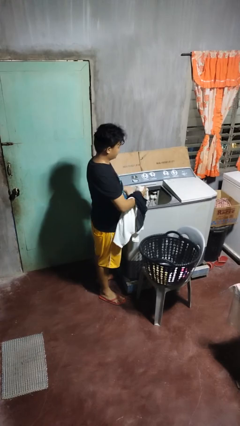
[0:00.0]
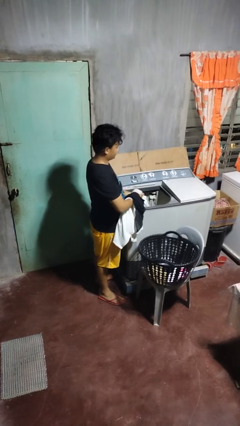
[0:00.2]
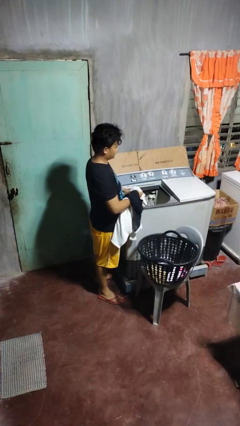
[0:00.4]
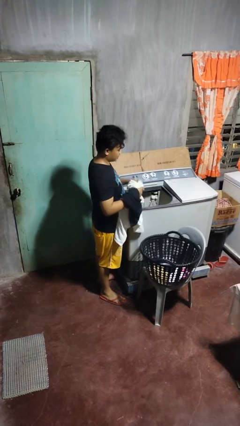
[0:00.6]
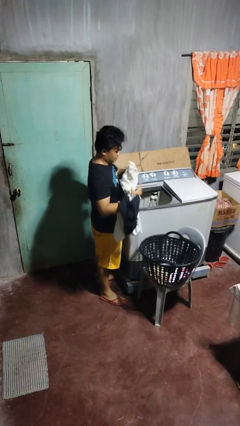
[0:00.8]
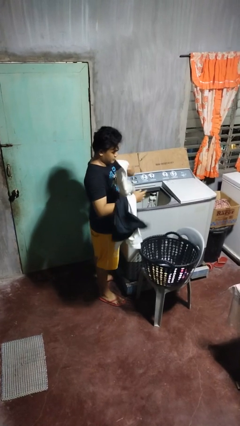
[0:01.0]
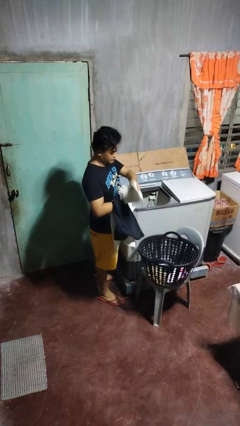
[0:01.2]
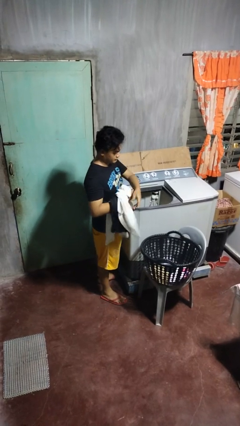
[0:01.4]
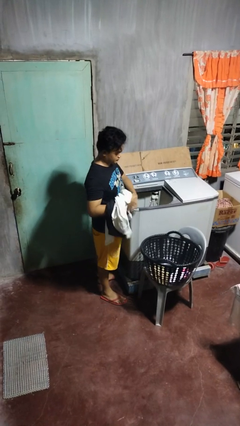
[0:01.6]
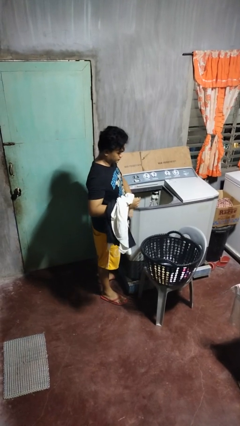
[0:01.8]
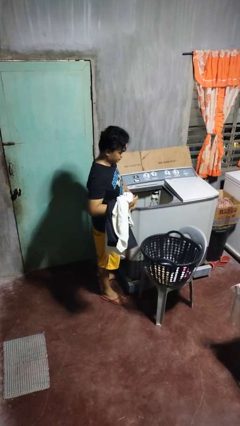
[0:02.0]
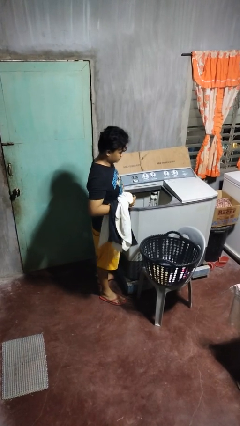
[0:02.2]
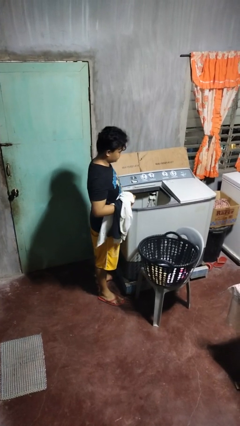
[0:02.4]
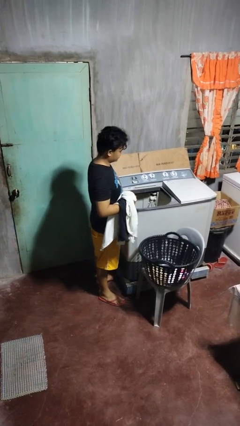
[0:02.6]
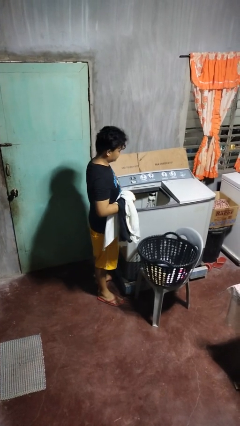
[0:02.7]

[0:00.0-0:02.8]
person loads clotheswasher

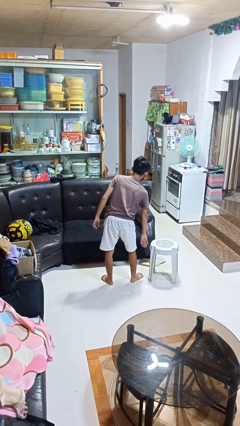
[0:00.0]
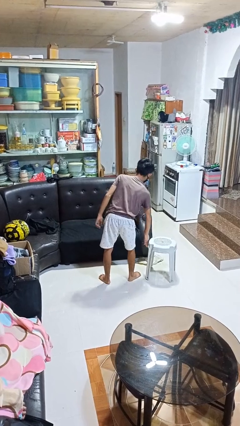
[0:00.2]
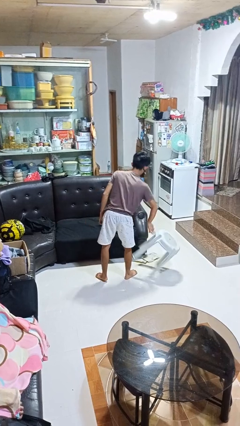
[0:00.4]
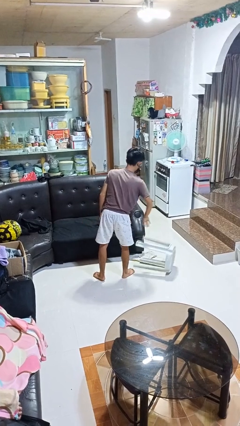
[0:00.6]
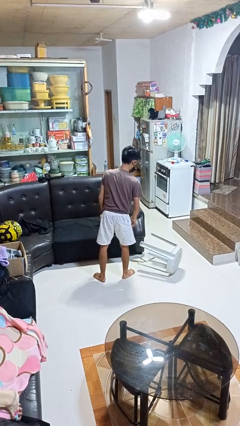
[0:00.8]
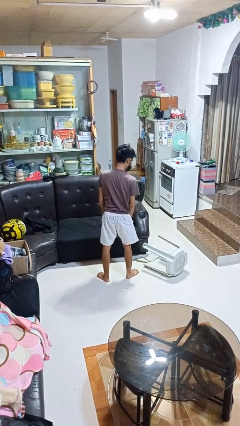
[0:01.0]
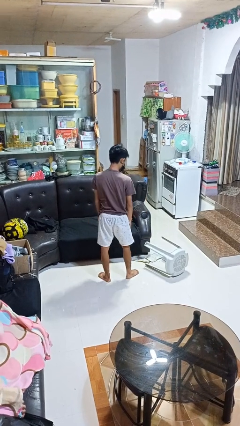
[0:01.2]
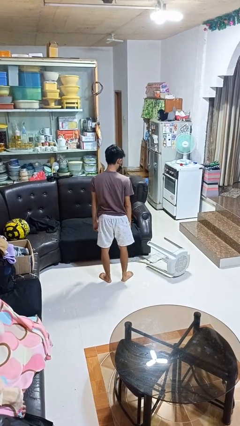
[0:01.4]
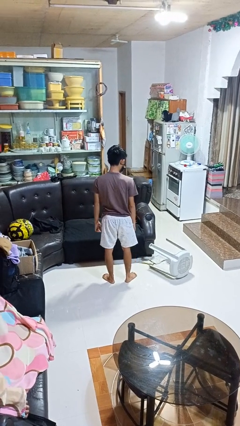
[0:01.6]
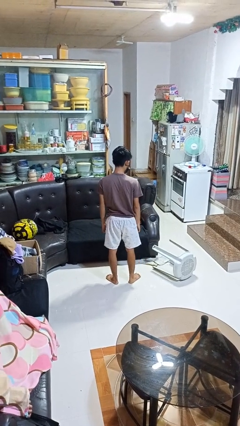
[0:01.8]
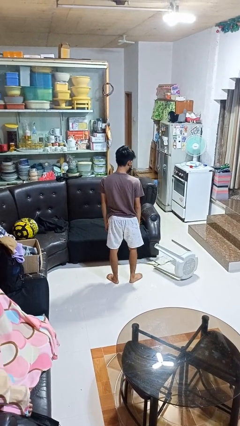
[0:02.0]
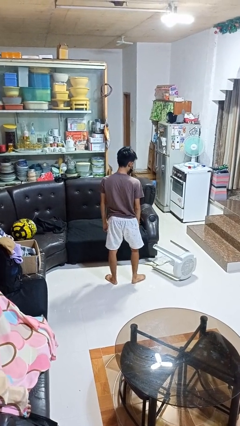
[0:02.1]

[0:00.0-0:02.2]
person knocks over furniture

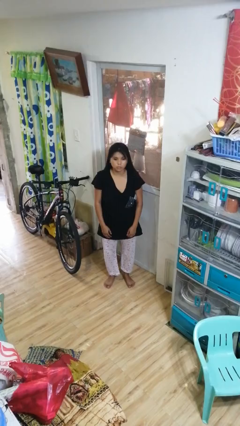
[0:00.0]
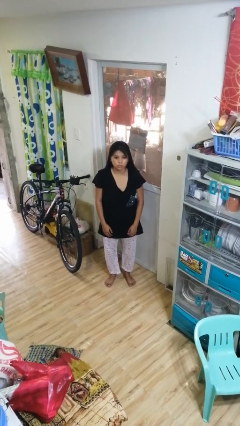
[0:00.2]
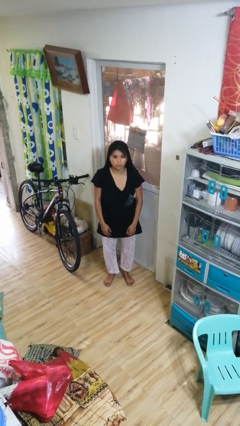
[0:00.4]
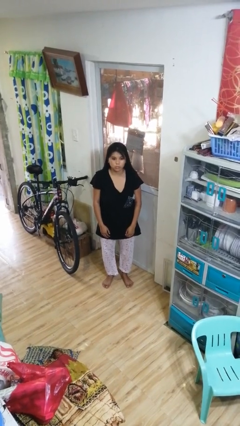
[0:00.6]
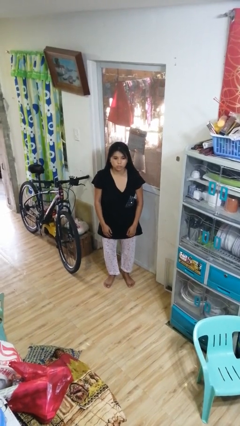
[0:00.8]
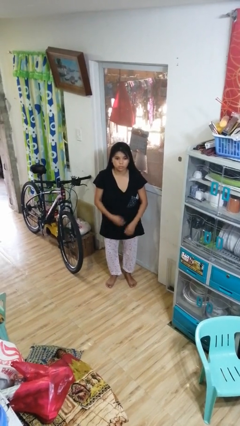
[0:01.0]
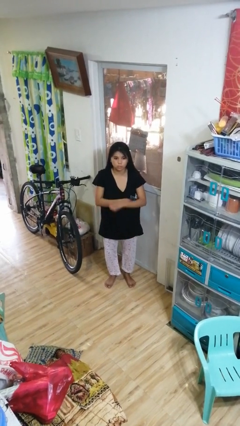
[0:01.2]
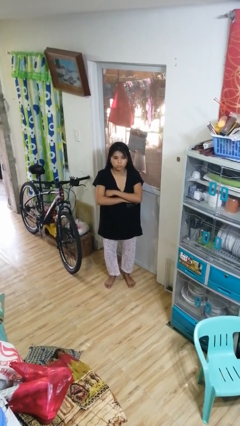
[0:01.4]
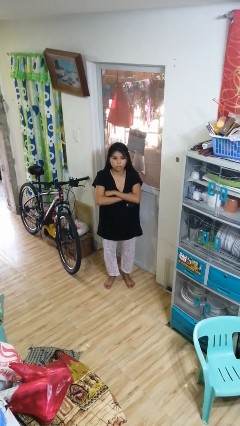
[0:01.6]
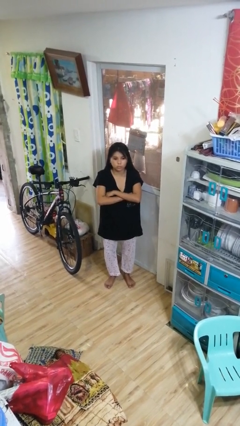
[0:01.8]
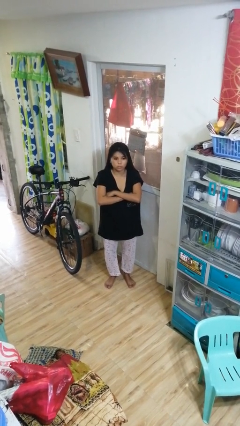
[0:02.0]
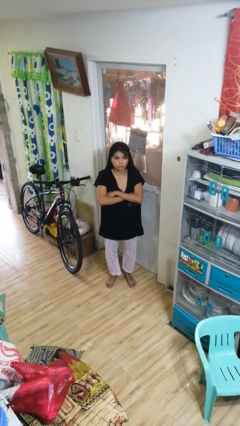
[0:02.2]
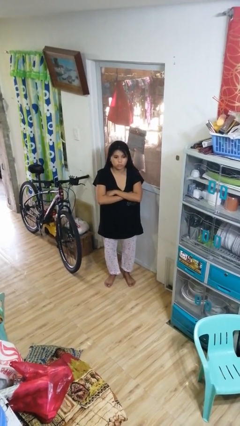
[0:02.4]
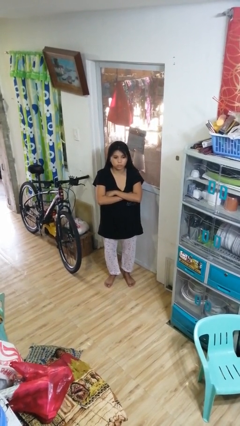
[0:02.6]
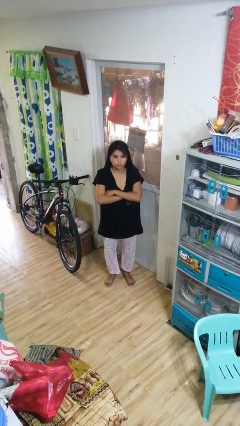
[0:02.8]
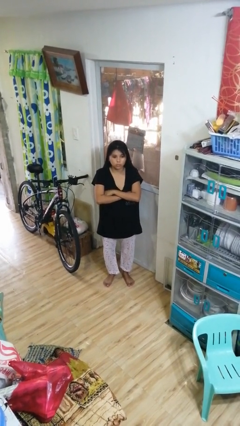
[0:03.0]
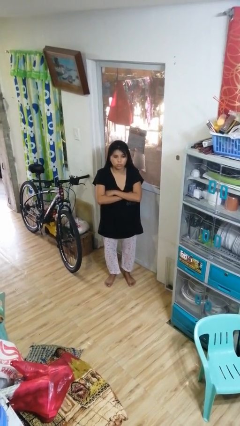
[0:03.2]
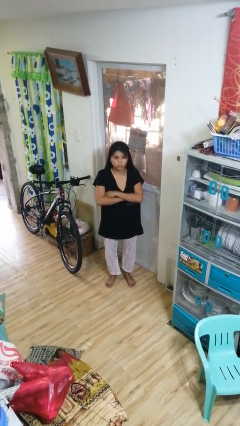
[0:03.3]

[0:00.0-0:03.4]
person crosses arms

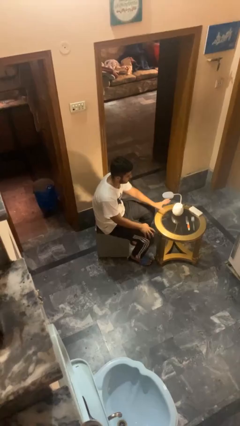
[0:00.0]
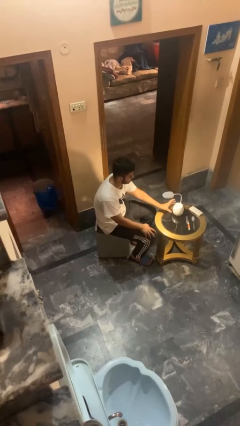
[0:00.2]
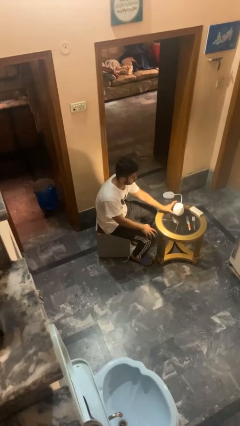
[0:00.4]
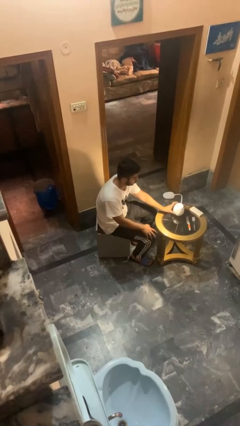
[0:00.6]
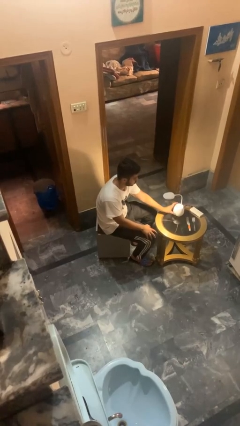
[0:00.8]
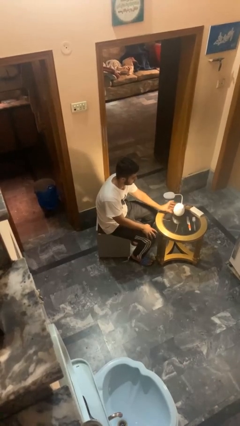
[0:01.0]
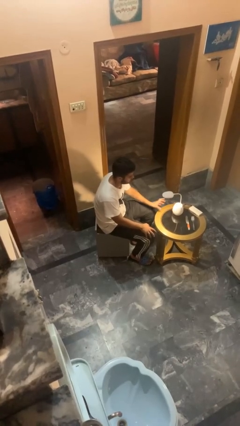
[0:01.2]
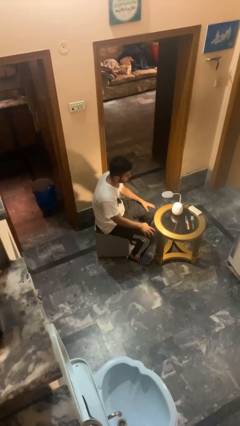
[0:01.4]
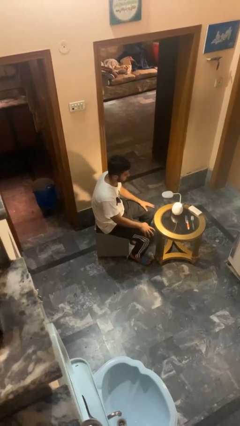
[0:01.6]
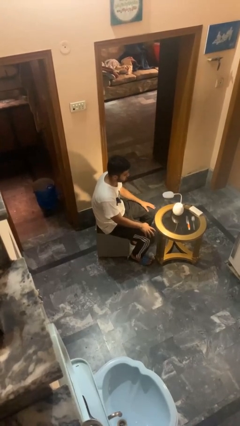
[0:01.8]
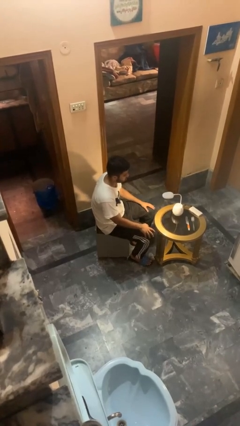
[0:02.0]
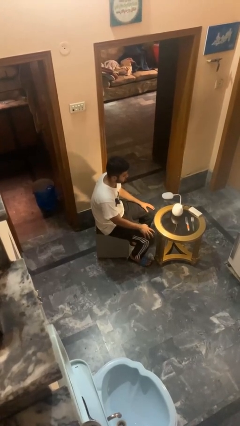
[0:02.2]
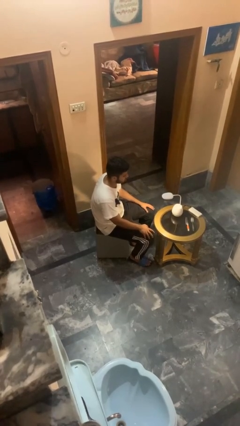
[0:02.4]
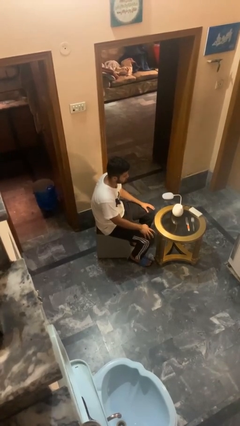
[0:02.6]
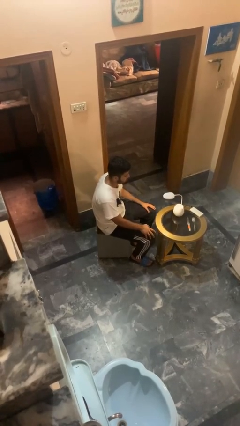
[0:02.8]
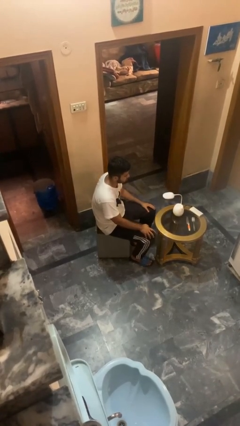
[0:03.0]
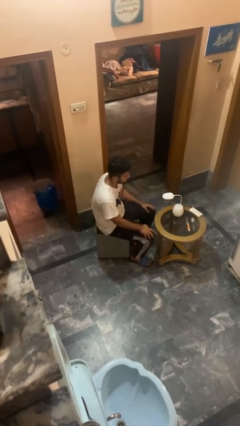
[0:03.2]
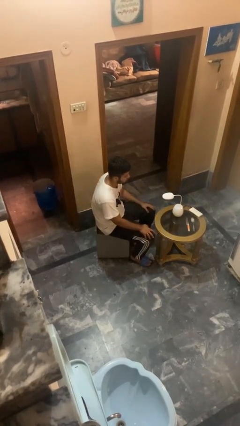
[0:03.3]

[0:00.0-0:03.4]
person turns off lamp

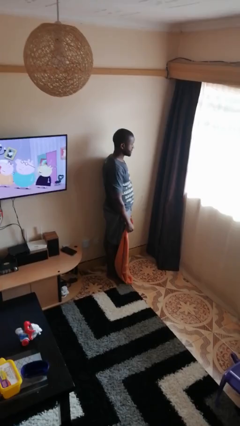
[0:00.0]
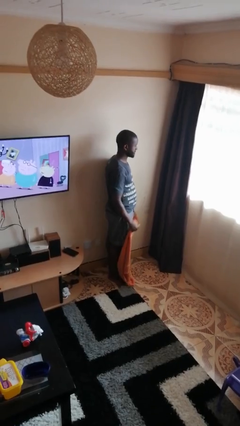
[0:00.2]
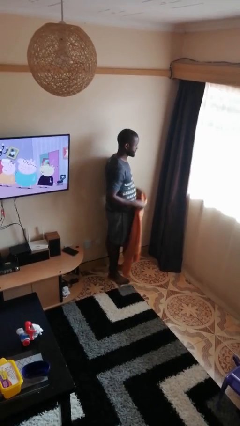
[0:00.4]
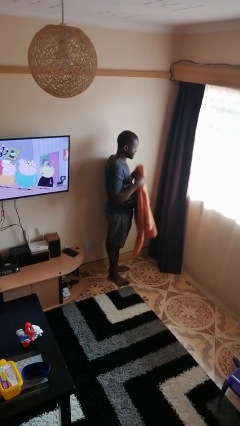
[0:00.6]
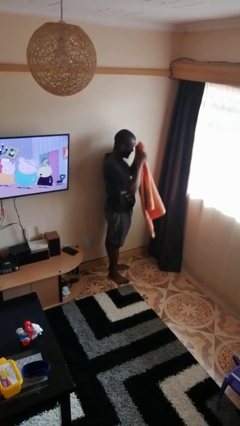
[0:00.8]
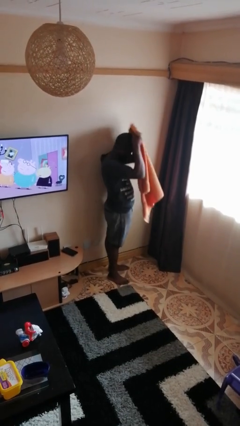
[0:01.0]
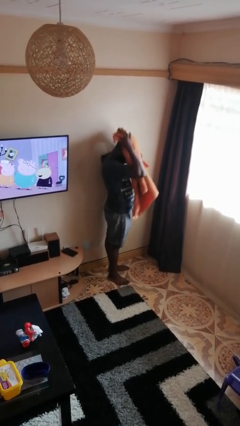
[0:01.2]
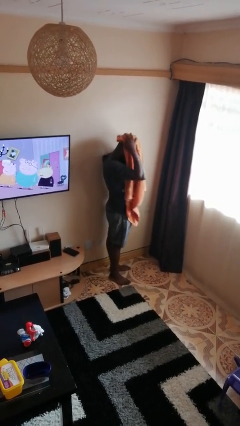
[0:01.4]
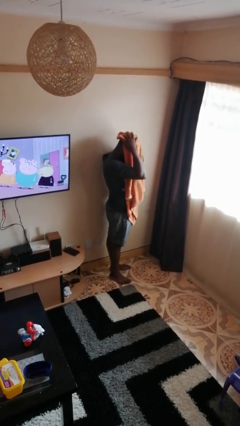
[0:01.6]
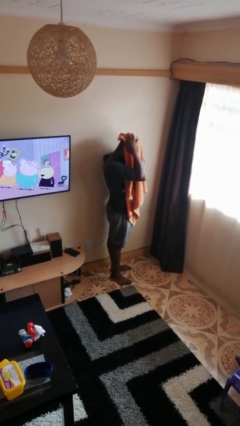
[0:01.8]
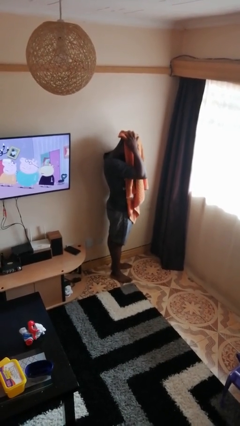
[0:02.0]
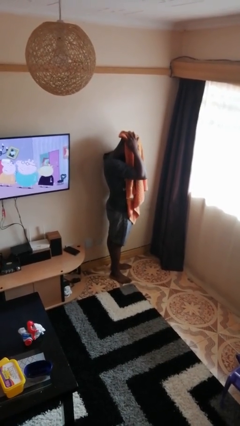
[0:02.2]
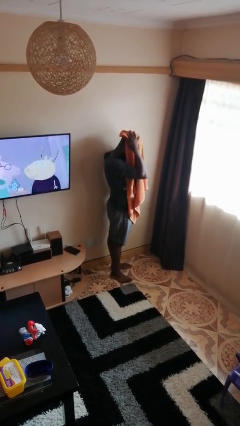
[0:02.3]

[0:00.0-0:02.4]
person dries hair with towel

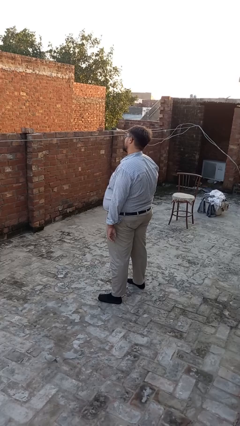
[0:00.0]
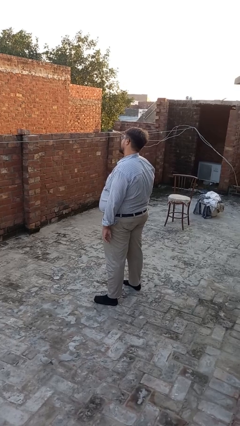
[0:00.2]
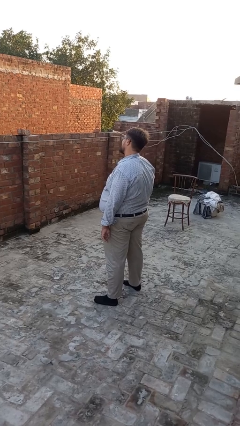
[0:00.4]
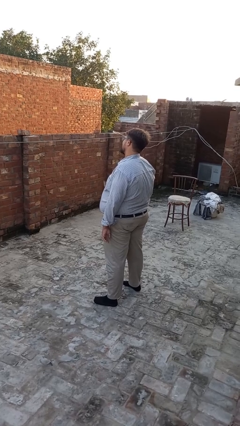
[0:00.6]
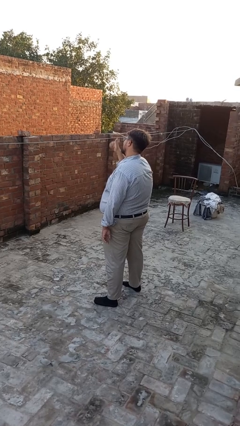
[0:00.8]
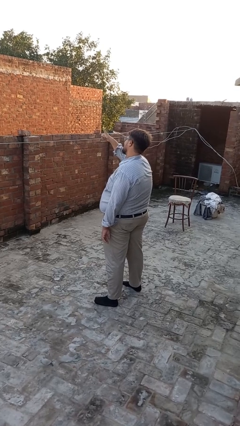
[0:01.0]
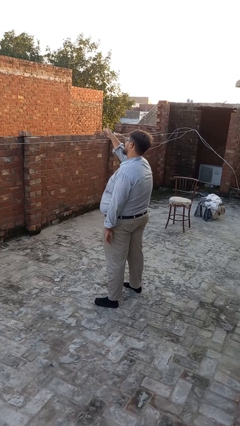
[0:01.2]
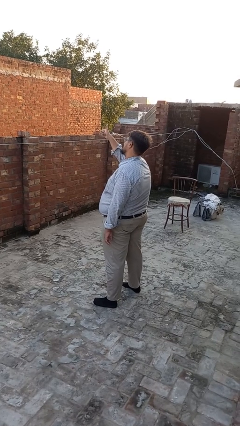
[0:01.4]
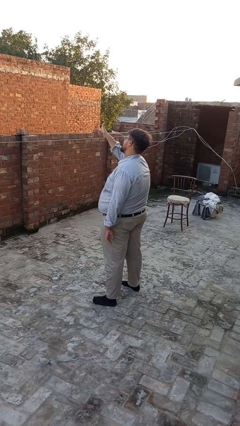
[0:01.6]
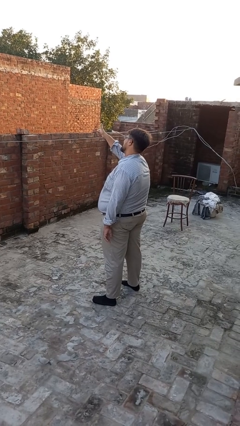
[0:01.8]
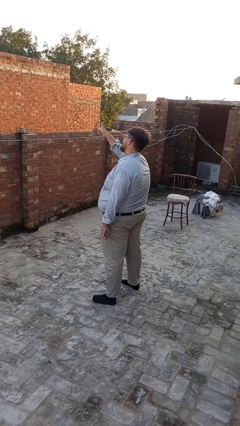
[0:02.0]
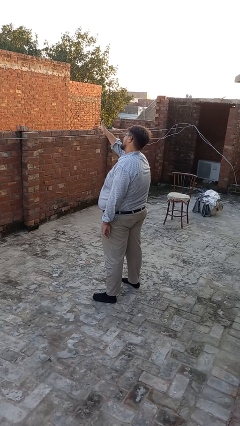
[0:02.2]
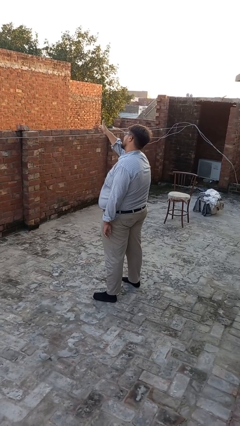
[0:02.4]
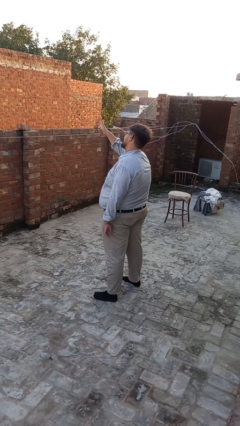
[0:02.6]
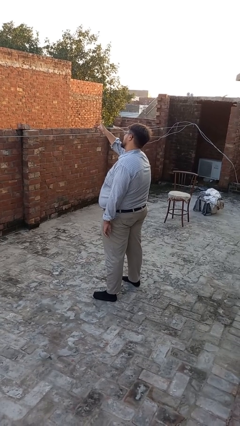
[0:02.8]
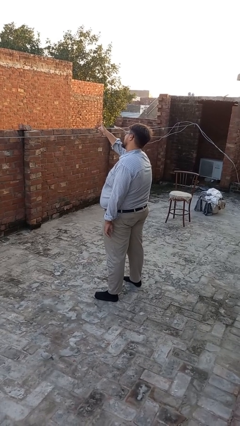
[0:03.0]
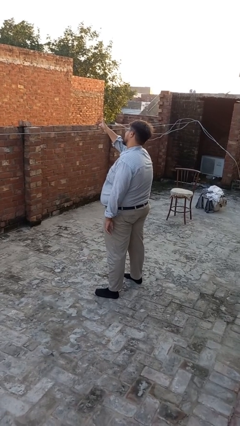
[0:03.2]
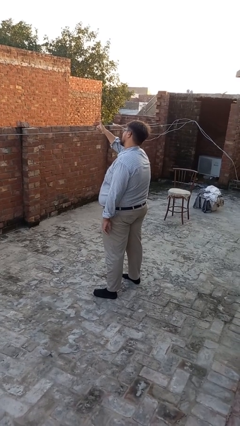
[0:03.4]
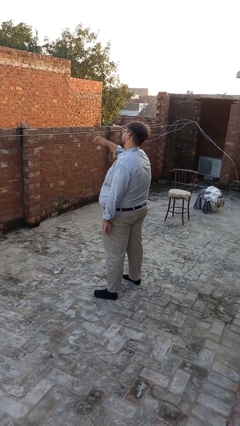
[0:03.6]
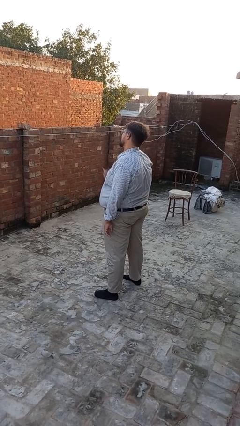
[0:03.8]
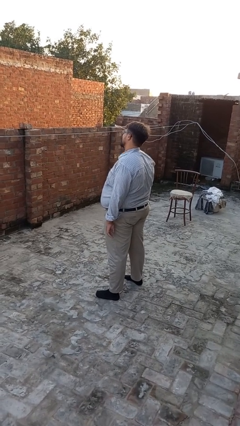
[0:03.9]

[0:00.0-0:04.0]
person gestures thumbs up
